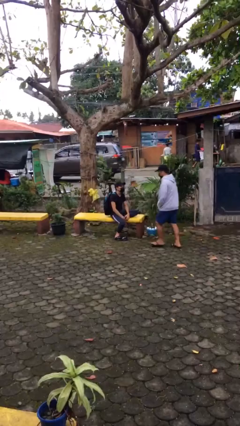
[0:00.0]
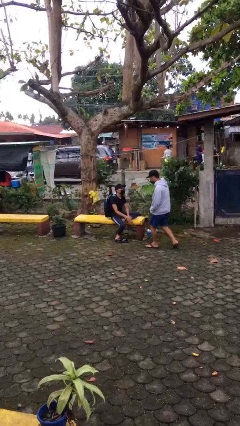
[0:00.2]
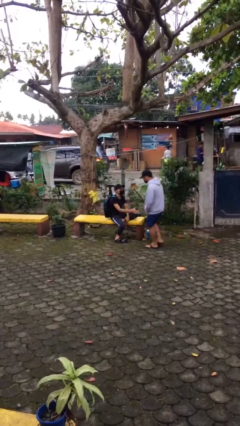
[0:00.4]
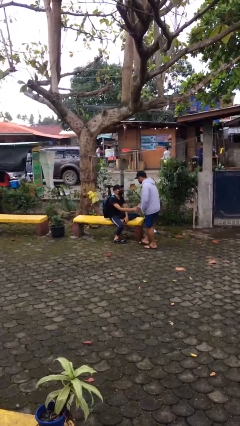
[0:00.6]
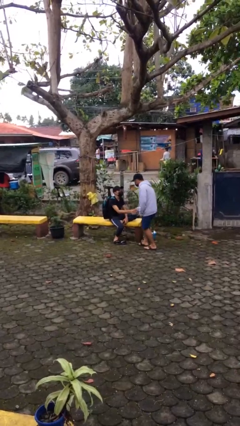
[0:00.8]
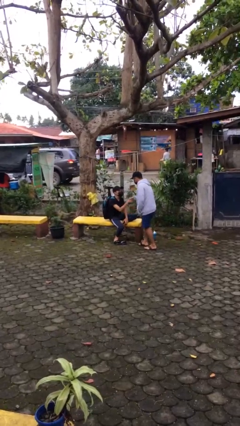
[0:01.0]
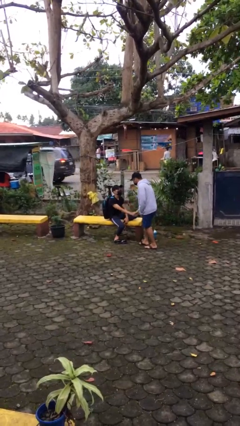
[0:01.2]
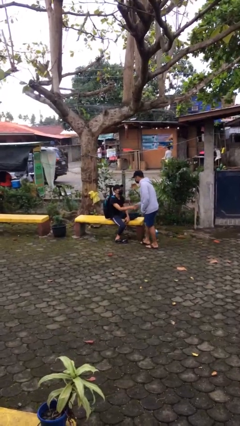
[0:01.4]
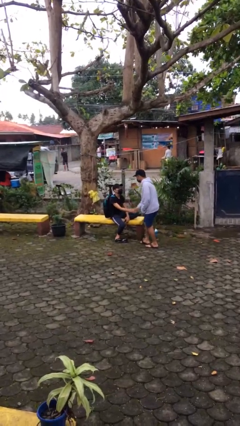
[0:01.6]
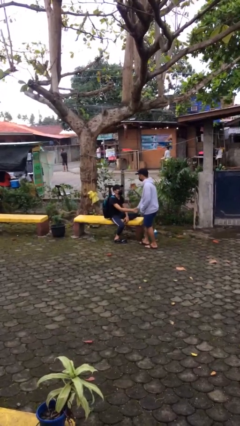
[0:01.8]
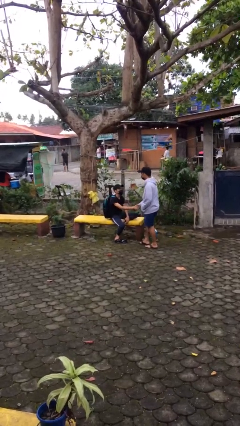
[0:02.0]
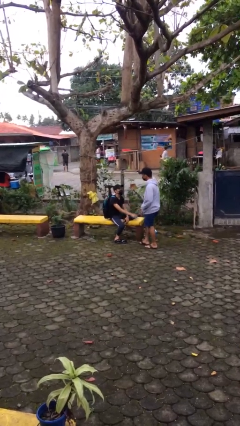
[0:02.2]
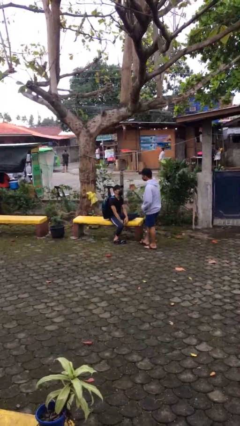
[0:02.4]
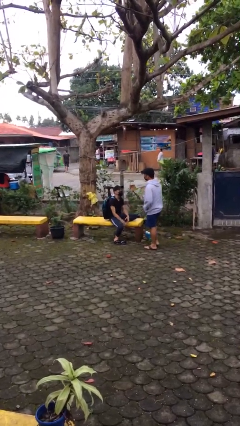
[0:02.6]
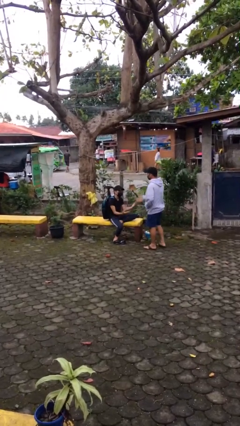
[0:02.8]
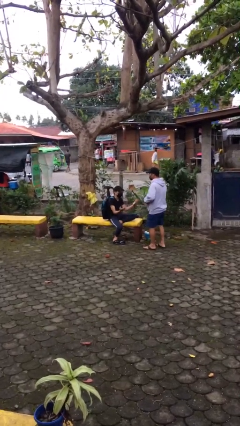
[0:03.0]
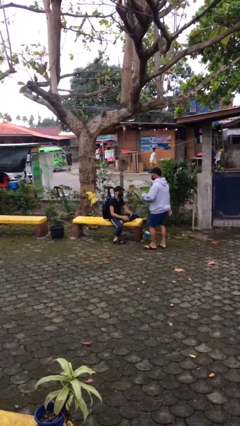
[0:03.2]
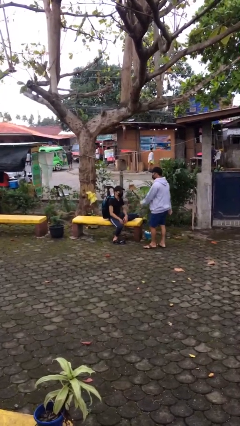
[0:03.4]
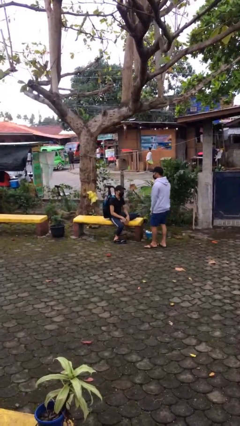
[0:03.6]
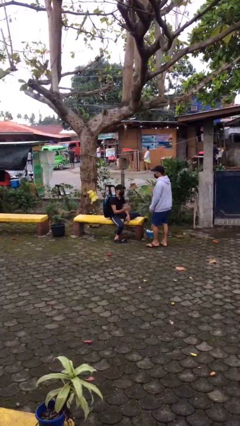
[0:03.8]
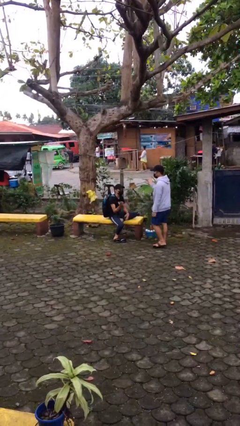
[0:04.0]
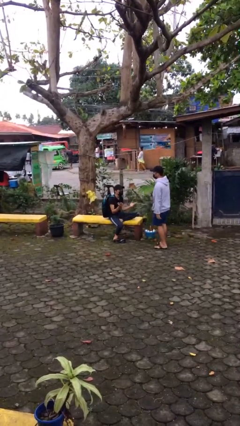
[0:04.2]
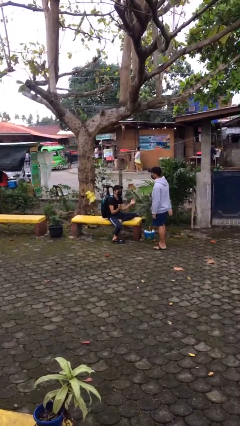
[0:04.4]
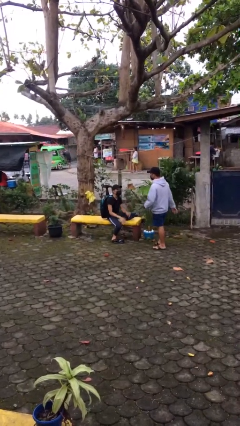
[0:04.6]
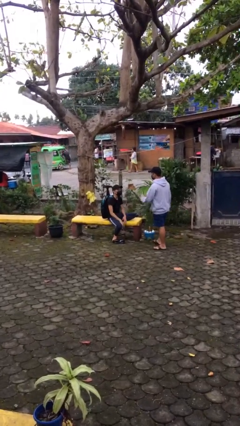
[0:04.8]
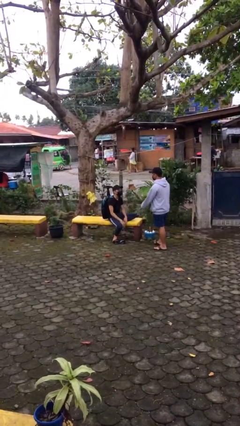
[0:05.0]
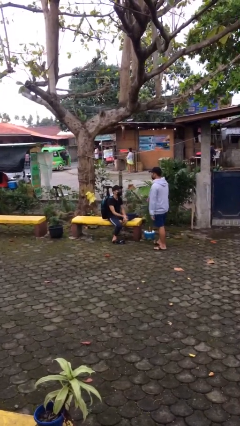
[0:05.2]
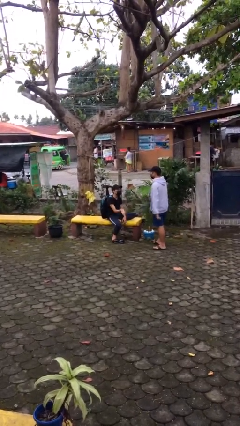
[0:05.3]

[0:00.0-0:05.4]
person shakes hand

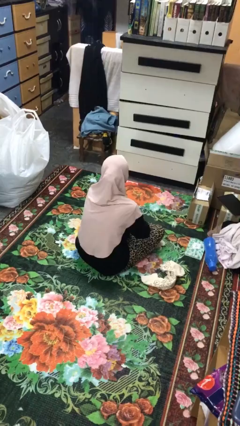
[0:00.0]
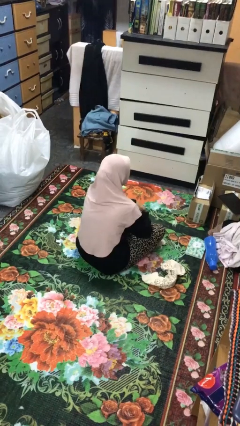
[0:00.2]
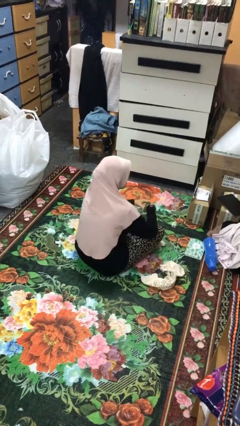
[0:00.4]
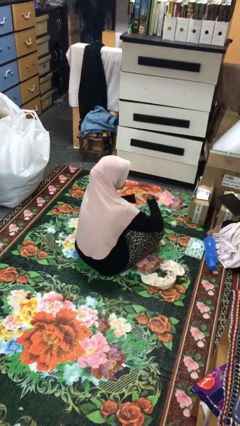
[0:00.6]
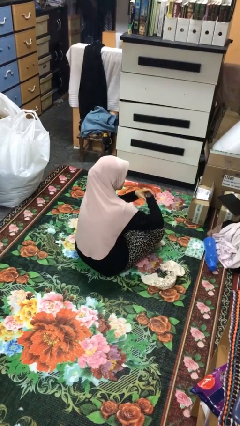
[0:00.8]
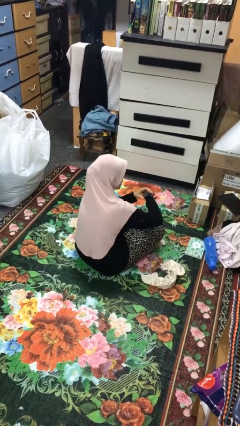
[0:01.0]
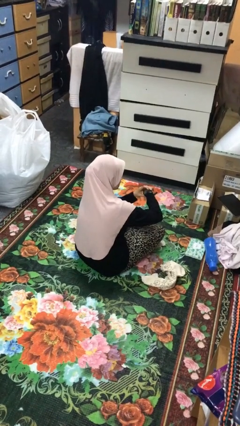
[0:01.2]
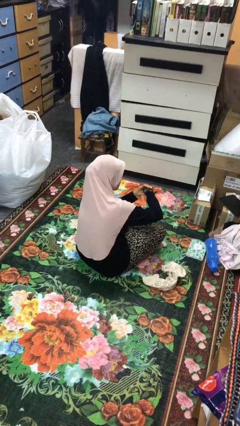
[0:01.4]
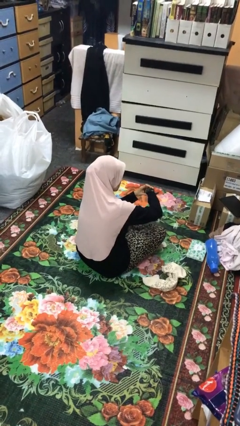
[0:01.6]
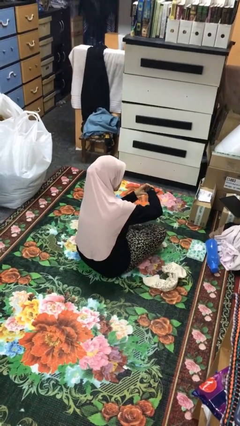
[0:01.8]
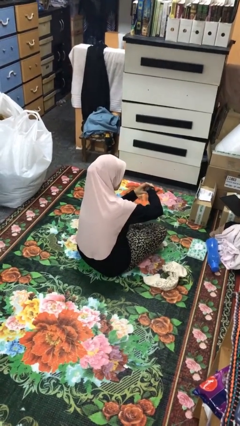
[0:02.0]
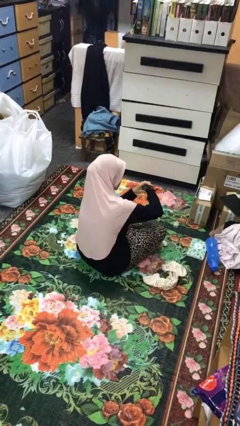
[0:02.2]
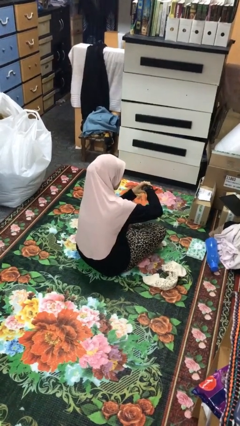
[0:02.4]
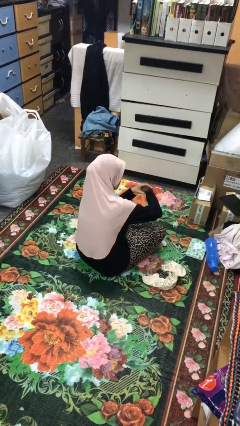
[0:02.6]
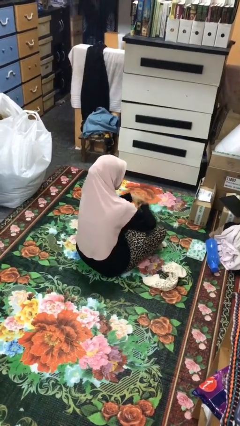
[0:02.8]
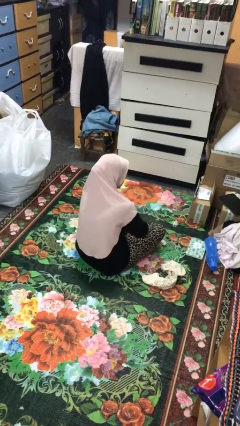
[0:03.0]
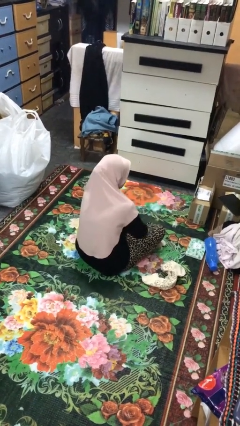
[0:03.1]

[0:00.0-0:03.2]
person looks at wristwatch

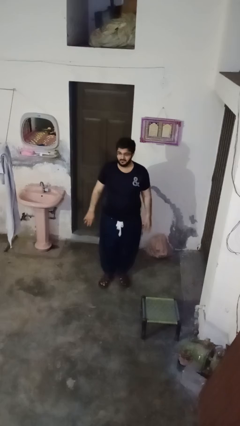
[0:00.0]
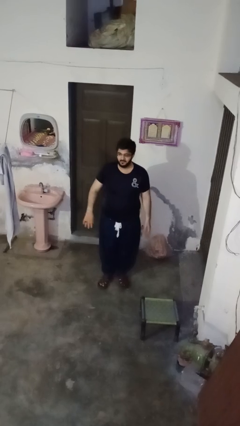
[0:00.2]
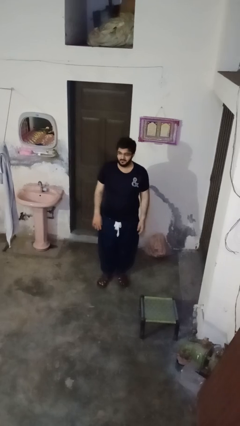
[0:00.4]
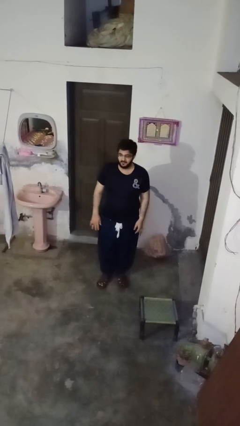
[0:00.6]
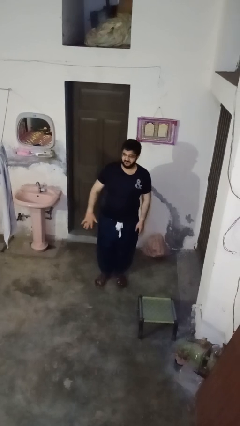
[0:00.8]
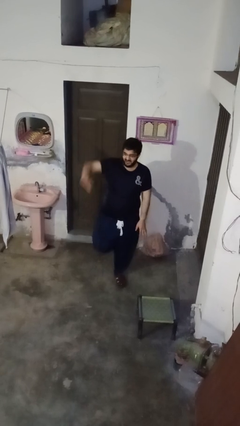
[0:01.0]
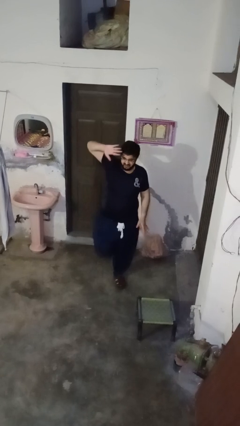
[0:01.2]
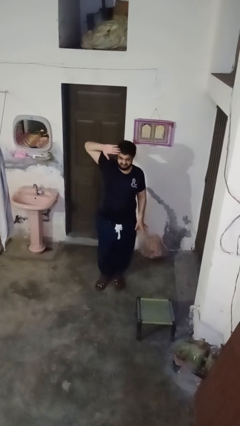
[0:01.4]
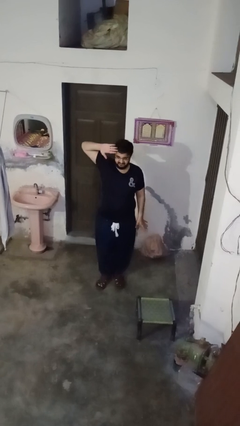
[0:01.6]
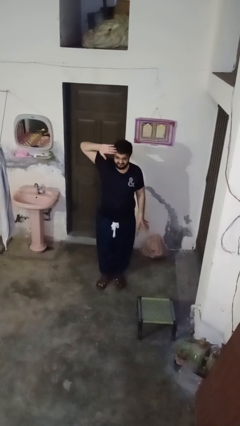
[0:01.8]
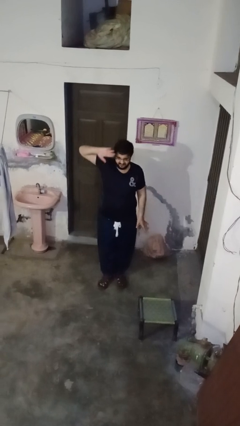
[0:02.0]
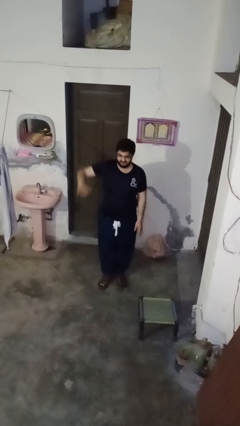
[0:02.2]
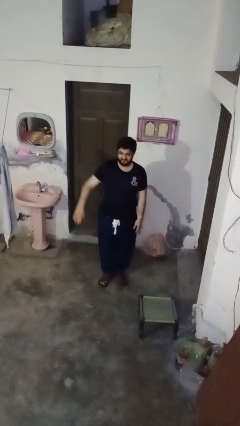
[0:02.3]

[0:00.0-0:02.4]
person salutes

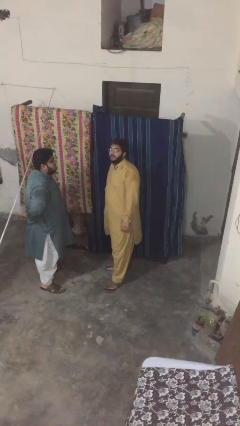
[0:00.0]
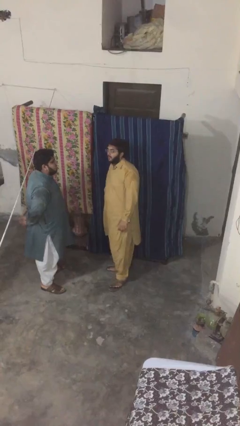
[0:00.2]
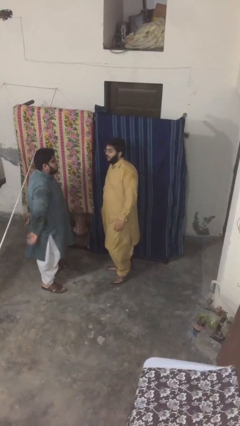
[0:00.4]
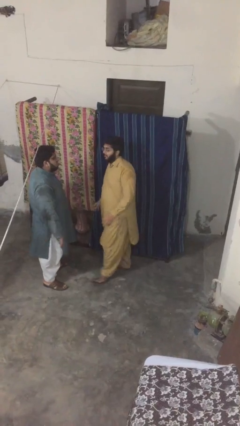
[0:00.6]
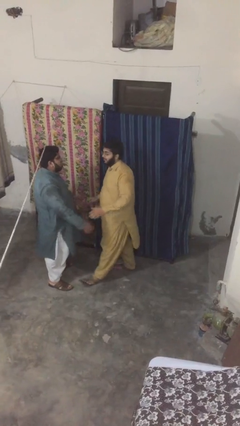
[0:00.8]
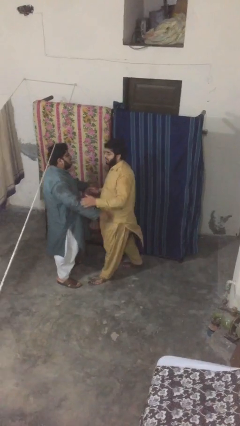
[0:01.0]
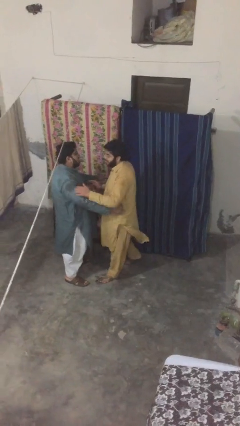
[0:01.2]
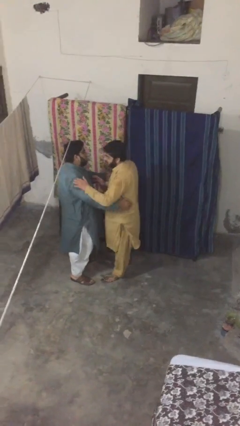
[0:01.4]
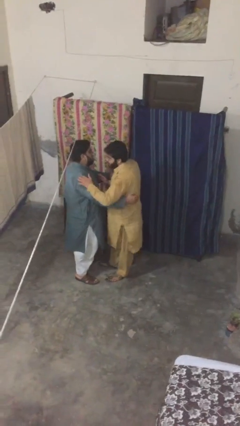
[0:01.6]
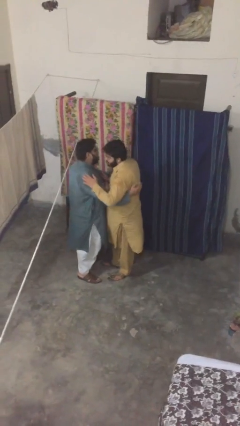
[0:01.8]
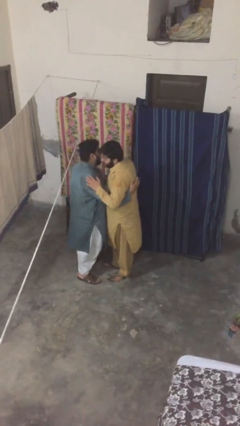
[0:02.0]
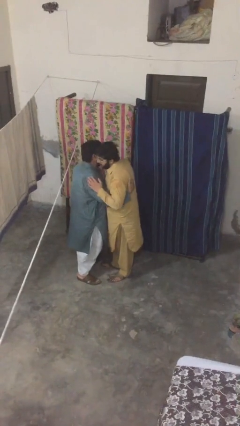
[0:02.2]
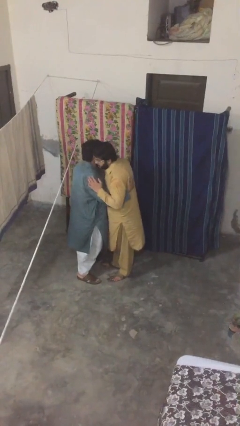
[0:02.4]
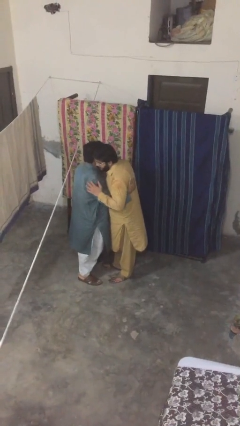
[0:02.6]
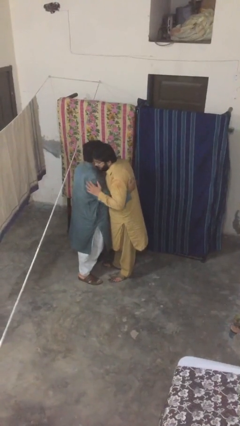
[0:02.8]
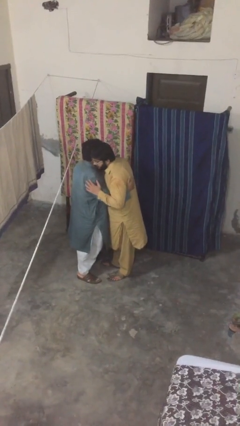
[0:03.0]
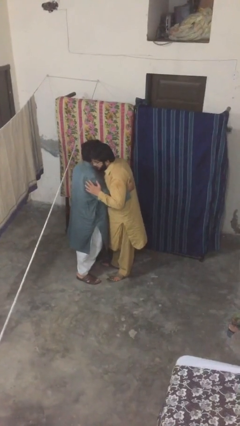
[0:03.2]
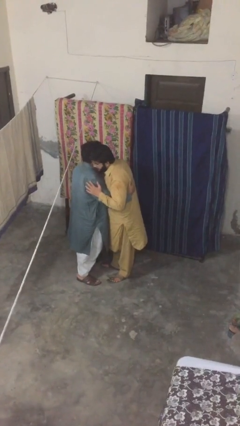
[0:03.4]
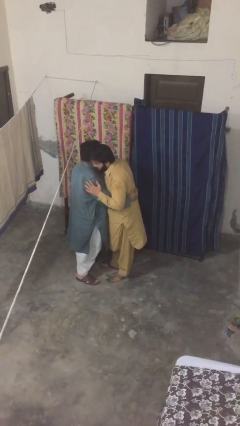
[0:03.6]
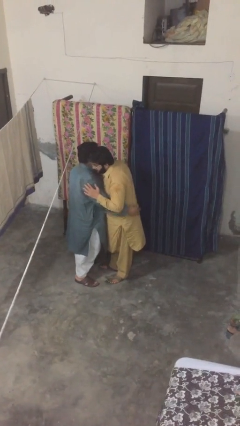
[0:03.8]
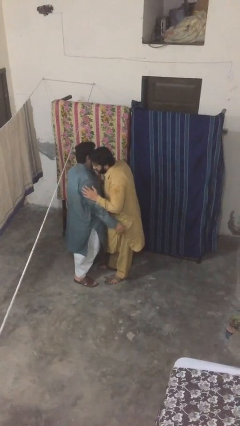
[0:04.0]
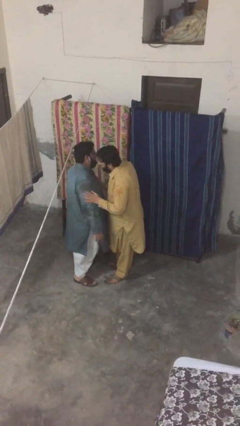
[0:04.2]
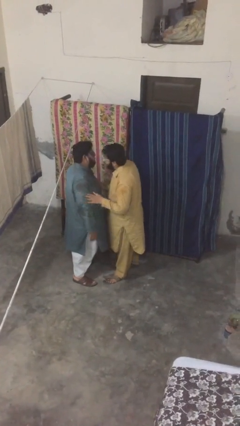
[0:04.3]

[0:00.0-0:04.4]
person embraces person

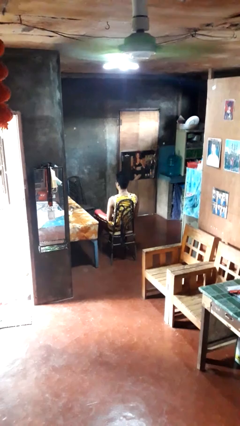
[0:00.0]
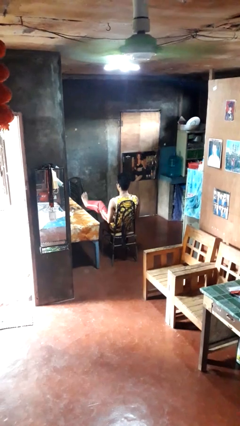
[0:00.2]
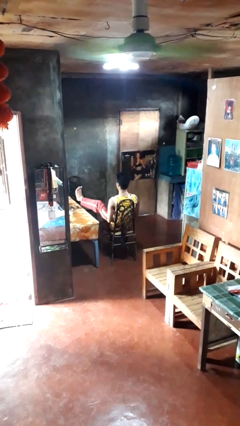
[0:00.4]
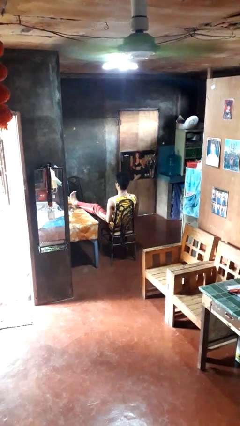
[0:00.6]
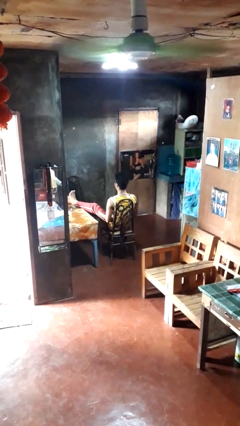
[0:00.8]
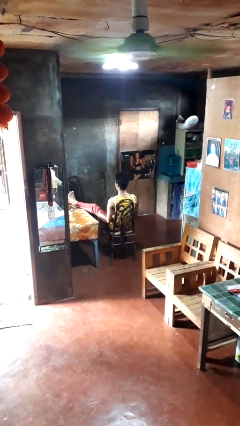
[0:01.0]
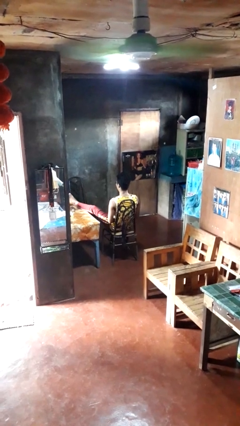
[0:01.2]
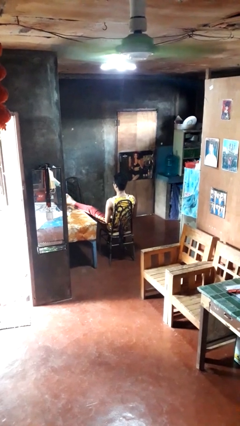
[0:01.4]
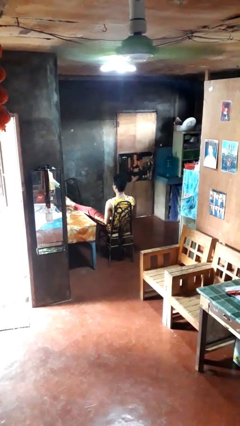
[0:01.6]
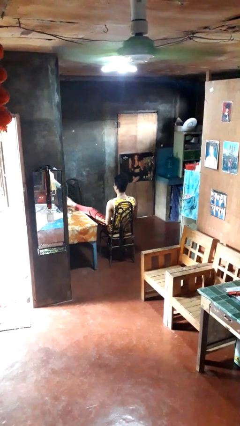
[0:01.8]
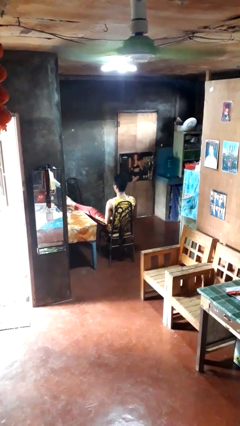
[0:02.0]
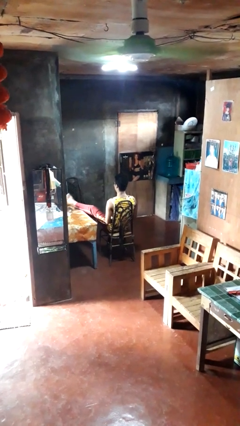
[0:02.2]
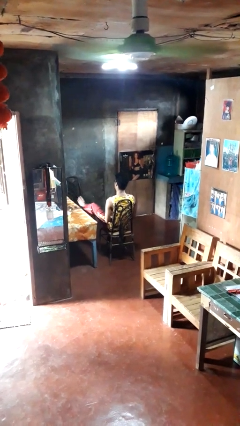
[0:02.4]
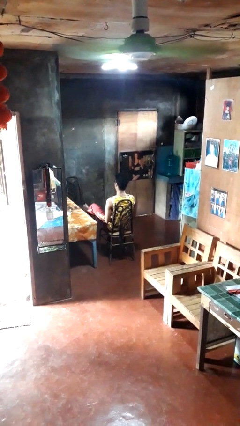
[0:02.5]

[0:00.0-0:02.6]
person puts feet up
